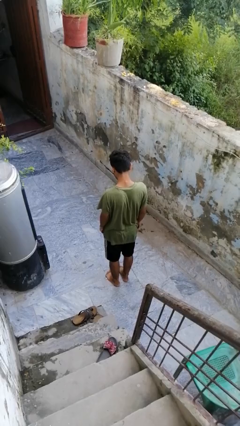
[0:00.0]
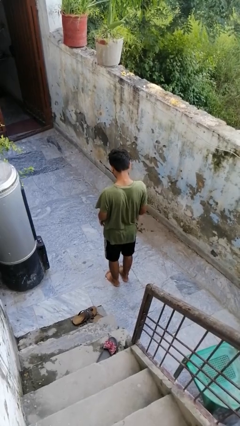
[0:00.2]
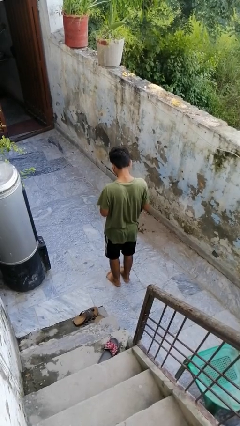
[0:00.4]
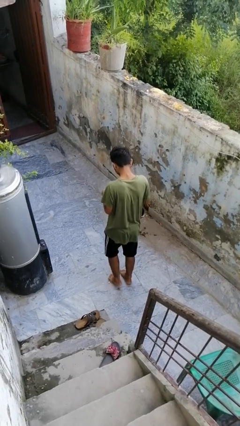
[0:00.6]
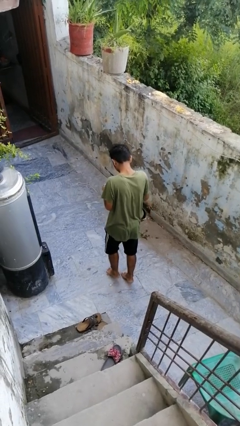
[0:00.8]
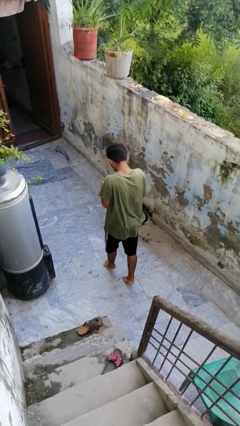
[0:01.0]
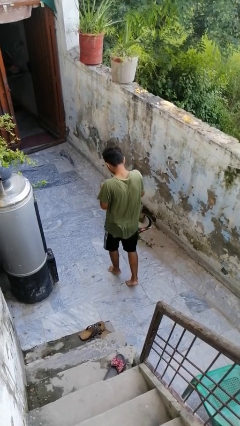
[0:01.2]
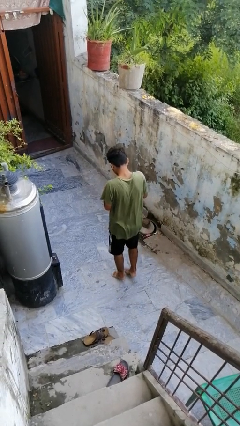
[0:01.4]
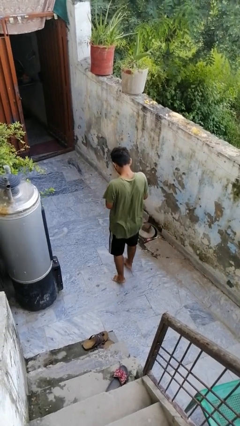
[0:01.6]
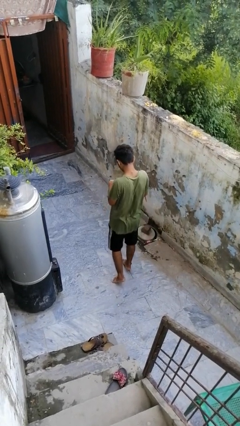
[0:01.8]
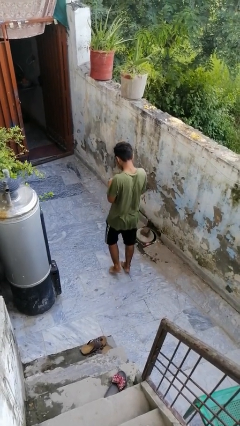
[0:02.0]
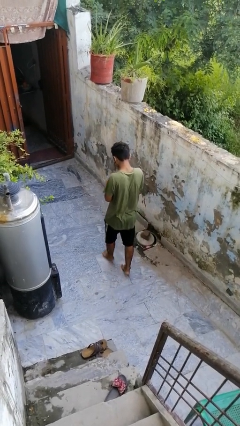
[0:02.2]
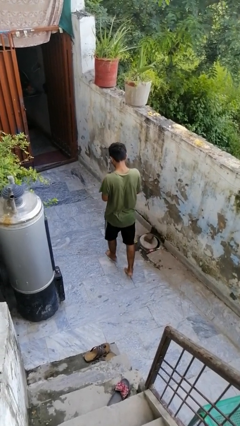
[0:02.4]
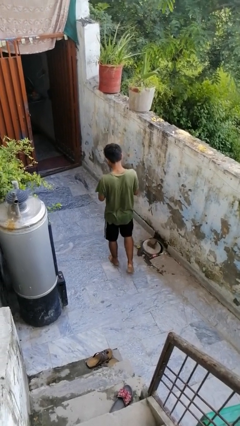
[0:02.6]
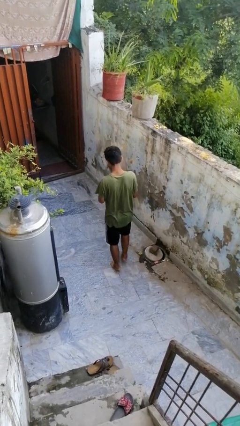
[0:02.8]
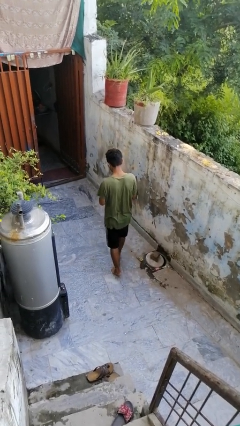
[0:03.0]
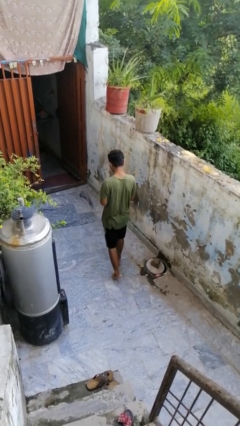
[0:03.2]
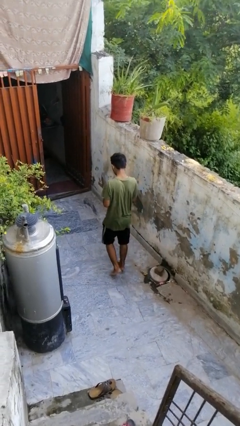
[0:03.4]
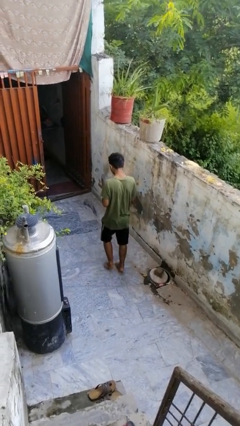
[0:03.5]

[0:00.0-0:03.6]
person walks tiptoe

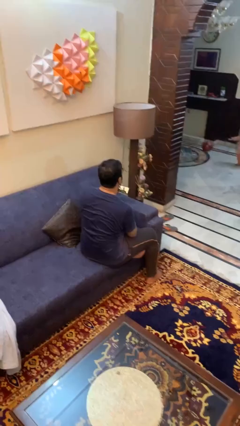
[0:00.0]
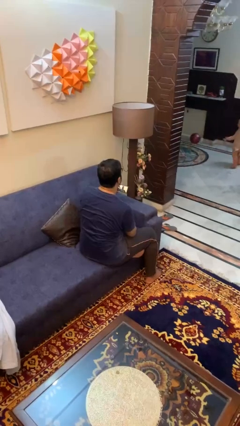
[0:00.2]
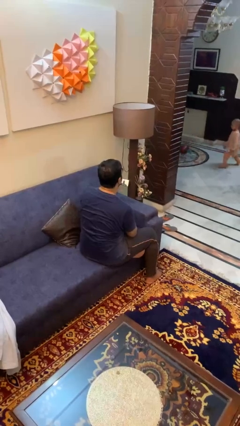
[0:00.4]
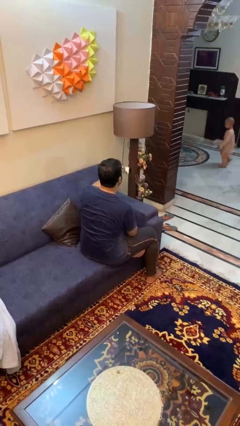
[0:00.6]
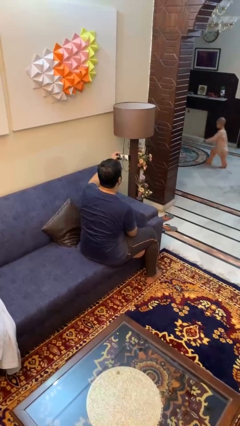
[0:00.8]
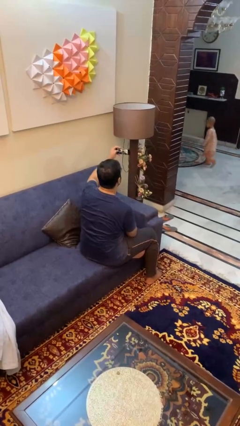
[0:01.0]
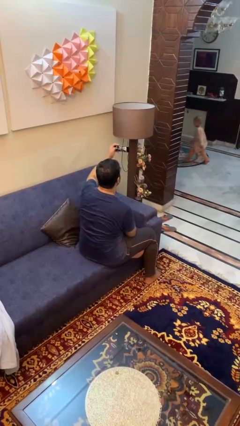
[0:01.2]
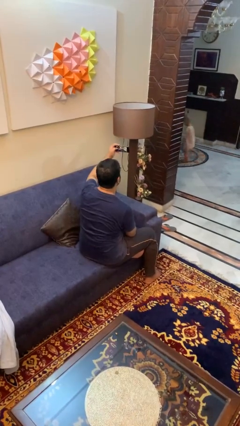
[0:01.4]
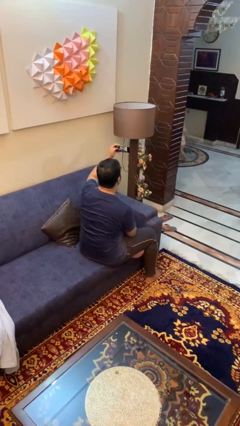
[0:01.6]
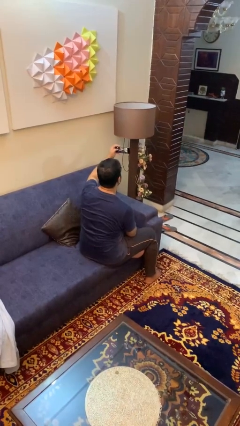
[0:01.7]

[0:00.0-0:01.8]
person takes selfie

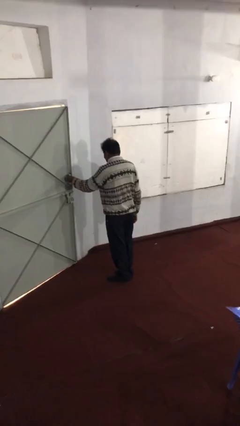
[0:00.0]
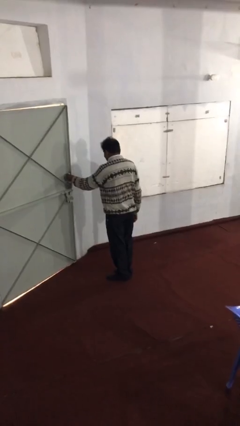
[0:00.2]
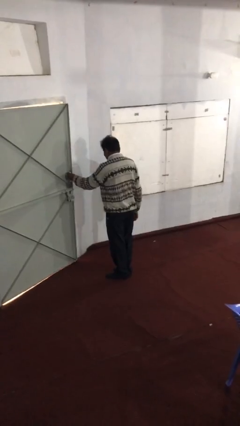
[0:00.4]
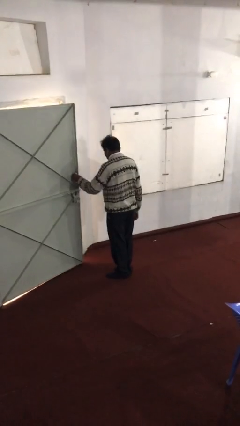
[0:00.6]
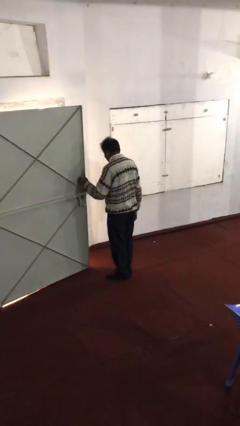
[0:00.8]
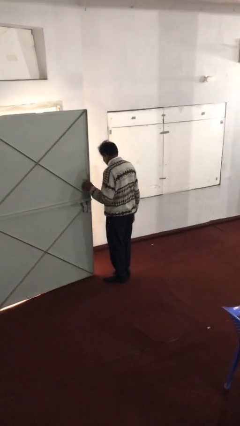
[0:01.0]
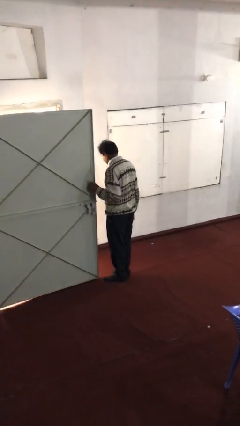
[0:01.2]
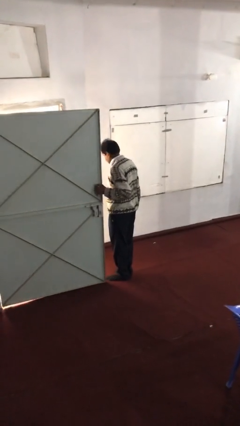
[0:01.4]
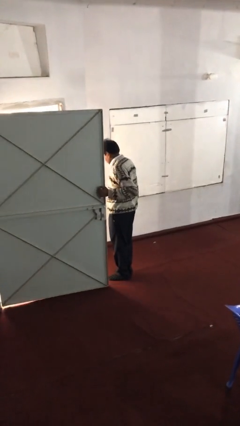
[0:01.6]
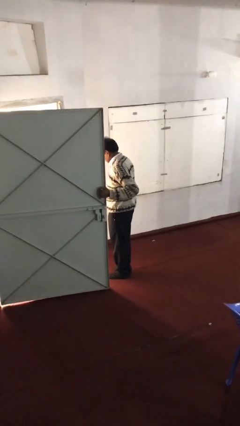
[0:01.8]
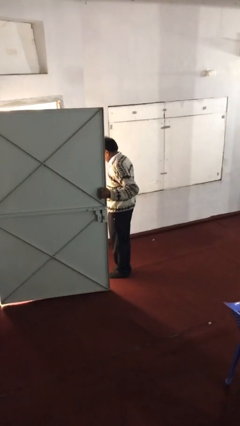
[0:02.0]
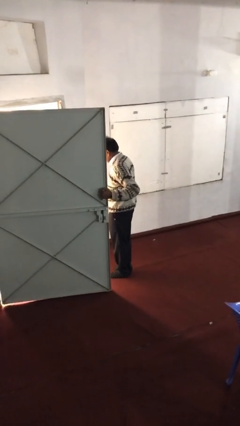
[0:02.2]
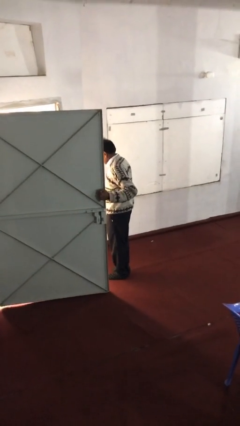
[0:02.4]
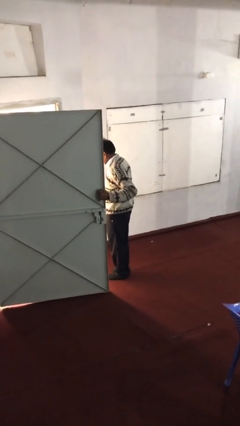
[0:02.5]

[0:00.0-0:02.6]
person opens facility door

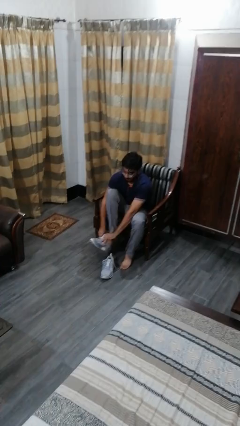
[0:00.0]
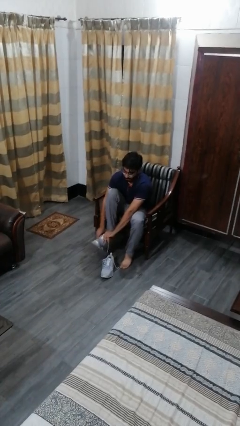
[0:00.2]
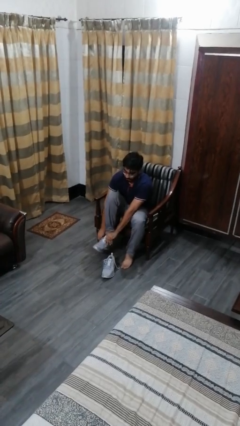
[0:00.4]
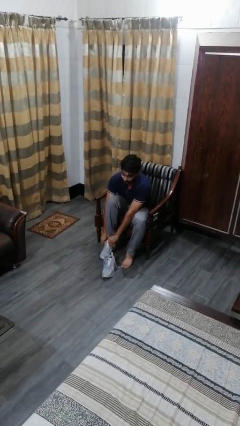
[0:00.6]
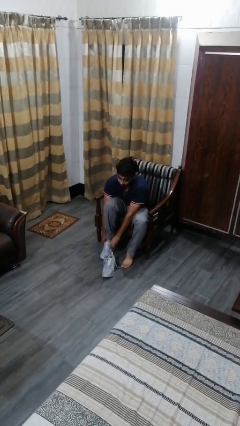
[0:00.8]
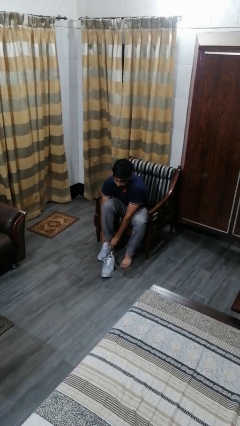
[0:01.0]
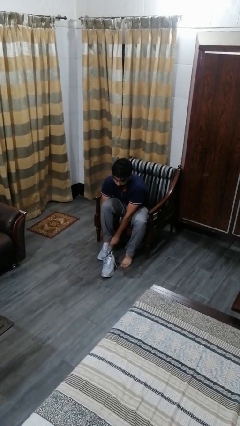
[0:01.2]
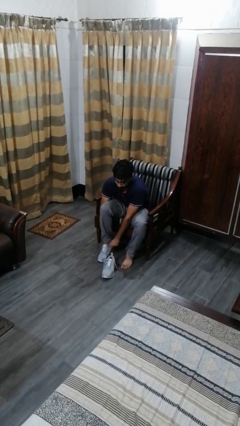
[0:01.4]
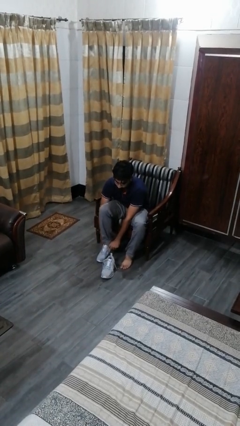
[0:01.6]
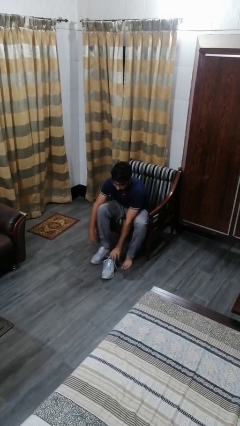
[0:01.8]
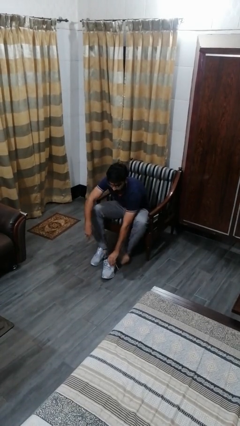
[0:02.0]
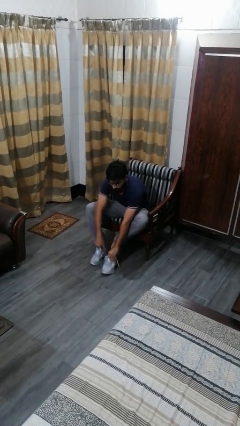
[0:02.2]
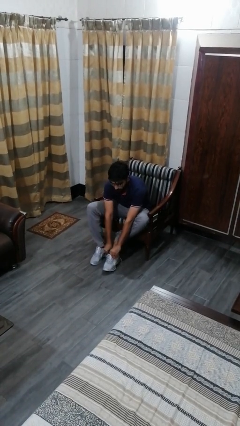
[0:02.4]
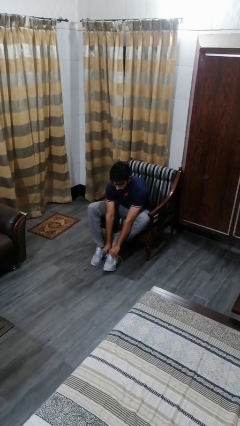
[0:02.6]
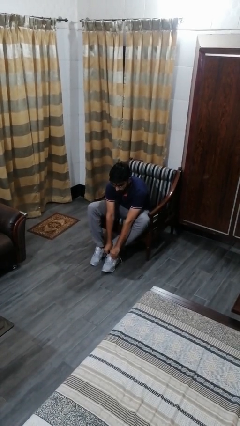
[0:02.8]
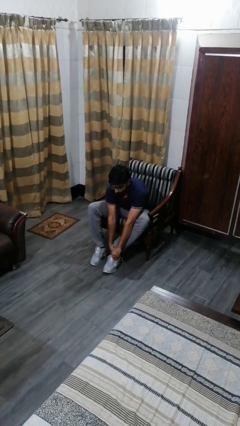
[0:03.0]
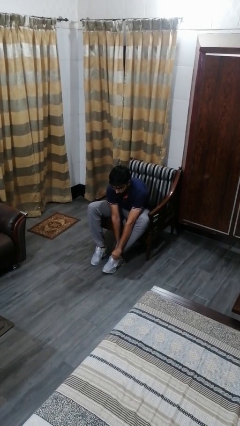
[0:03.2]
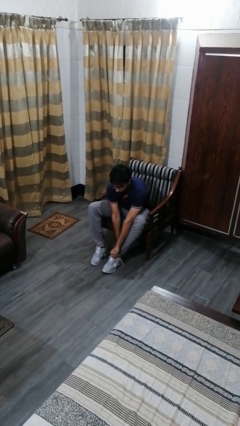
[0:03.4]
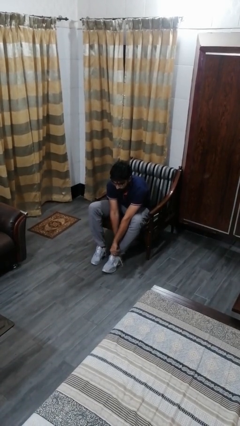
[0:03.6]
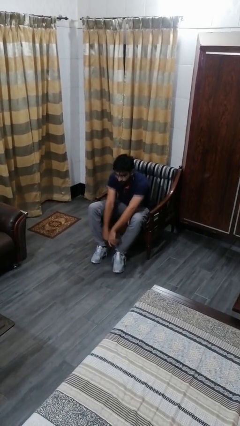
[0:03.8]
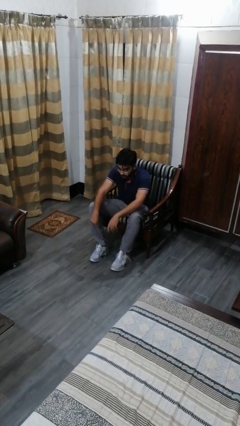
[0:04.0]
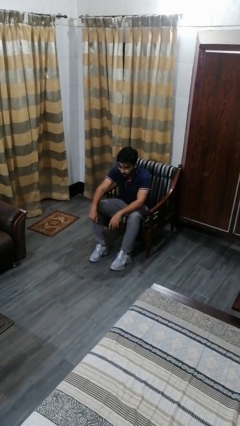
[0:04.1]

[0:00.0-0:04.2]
person puts on shoes

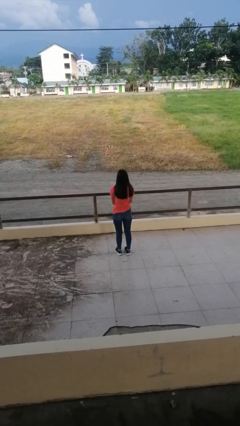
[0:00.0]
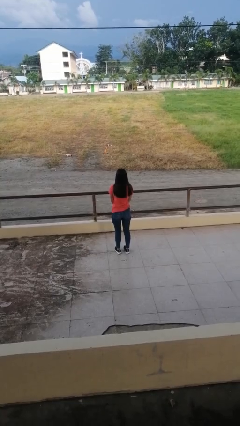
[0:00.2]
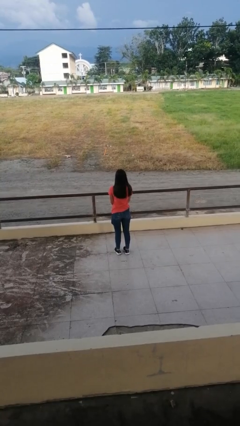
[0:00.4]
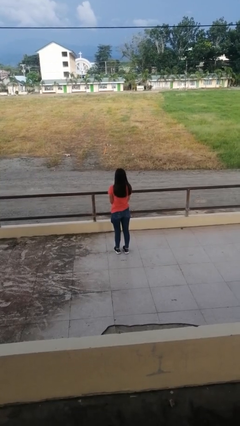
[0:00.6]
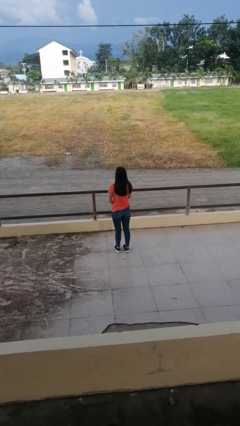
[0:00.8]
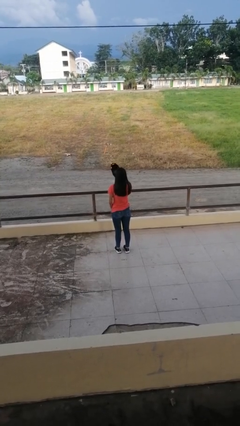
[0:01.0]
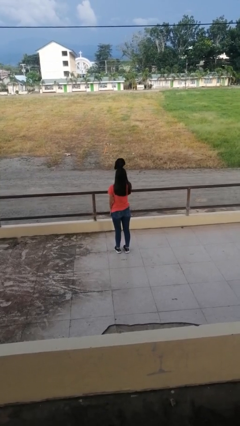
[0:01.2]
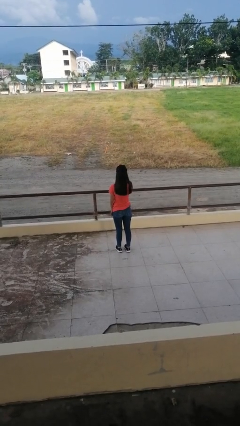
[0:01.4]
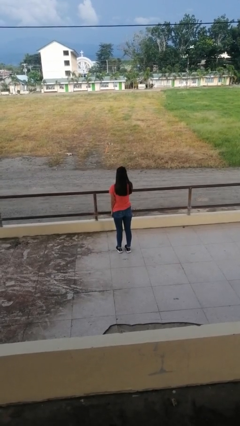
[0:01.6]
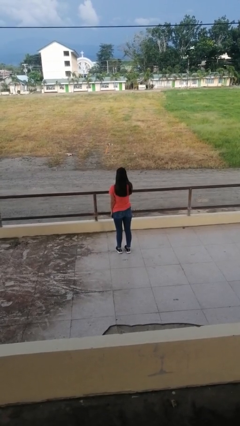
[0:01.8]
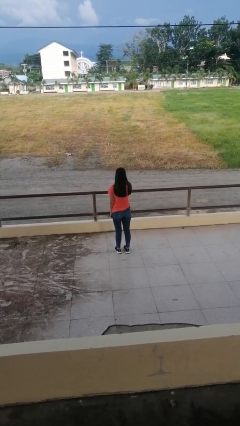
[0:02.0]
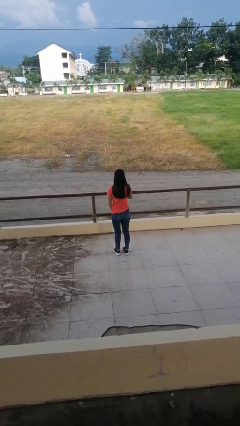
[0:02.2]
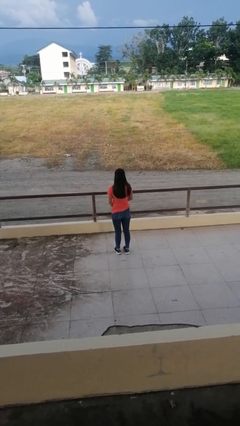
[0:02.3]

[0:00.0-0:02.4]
person puts on hat

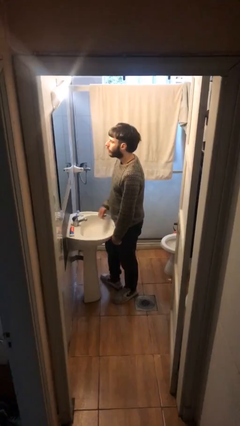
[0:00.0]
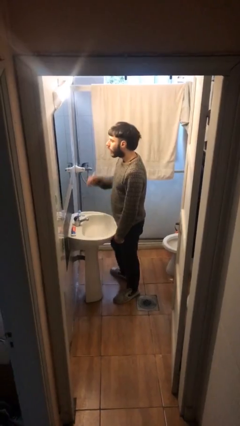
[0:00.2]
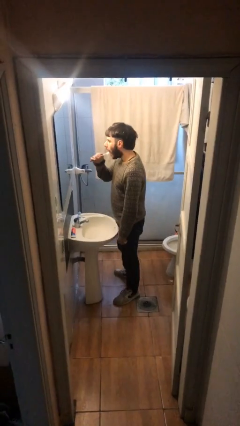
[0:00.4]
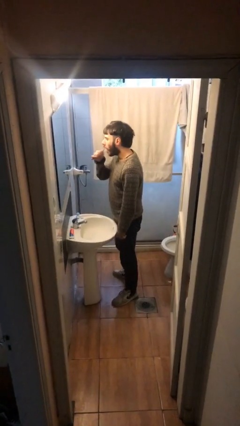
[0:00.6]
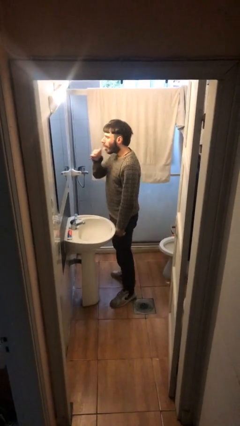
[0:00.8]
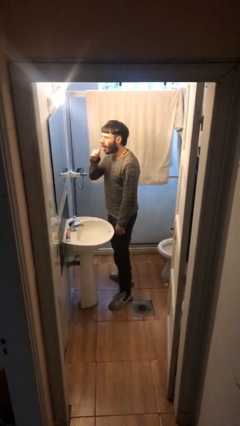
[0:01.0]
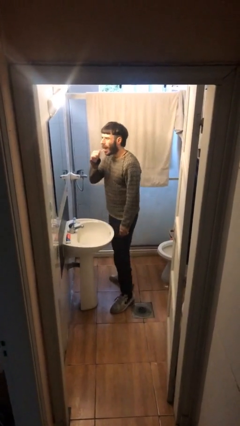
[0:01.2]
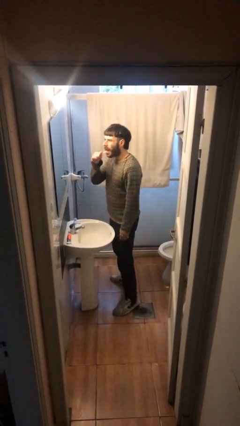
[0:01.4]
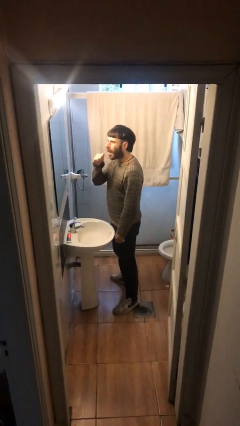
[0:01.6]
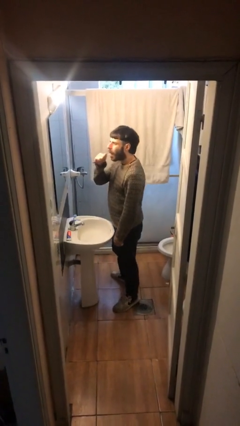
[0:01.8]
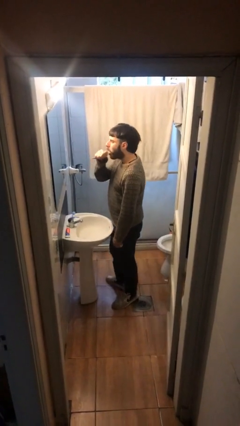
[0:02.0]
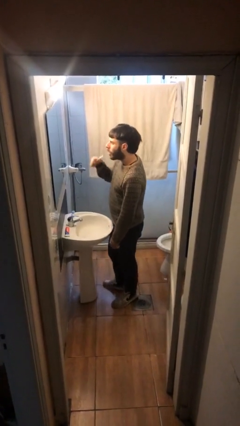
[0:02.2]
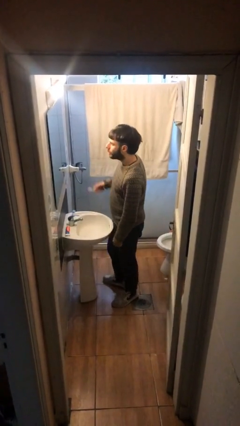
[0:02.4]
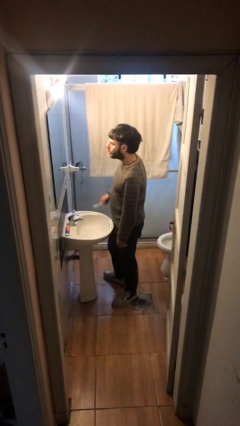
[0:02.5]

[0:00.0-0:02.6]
person brushes teeth
